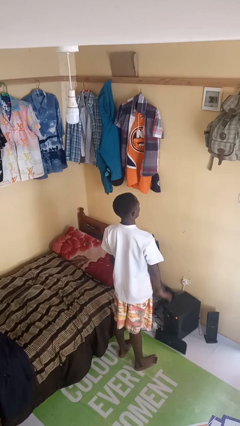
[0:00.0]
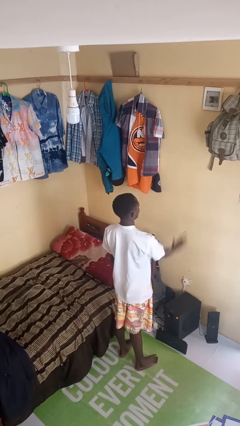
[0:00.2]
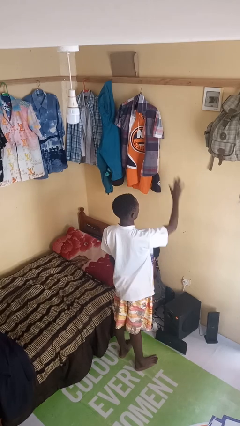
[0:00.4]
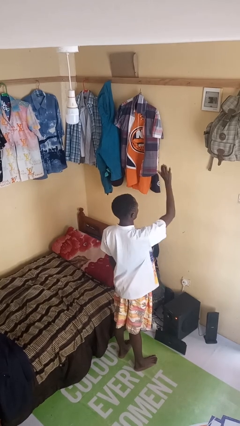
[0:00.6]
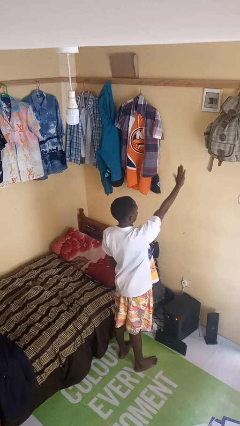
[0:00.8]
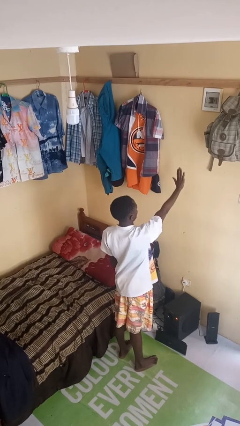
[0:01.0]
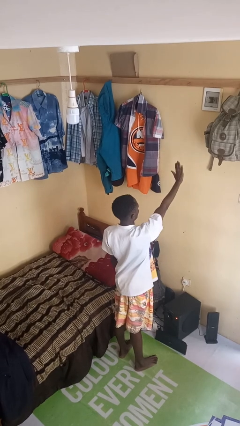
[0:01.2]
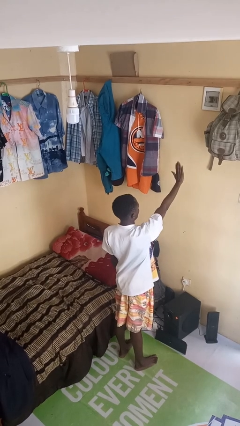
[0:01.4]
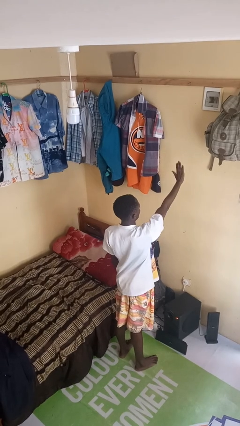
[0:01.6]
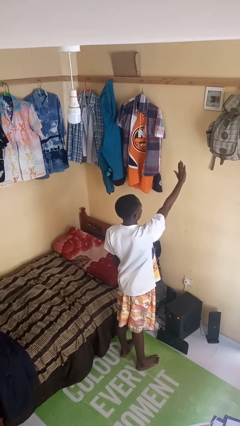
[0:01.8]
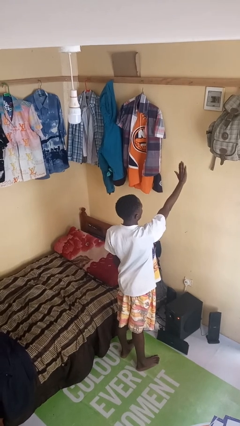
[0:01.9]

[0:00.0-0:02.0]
person gestures stop

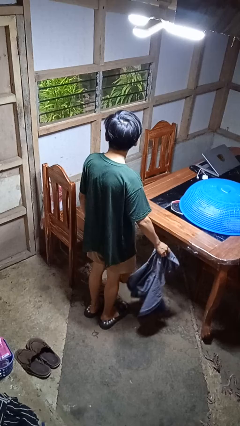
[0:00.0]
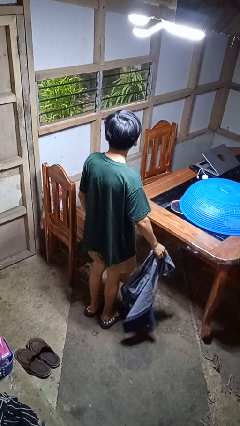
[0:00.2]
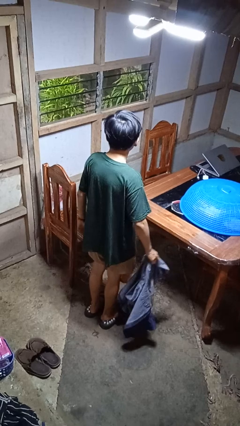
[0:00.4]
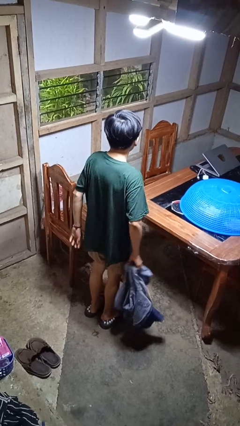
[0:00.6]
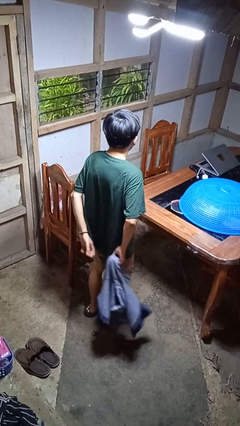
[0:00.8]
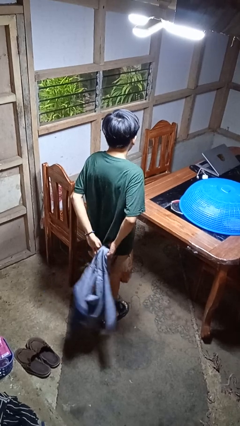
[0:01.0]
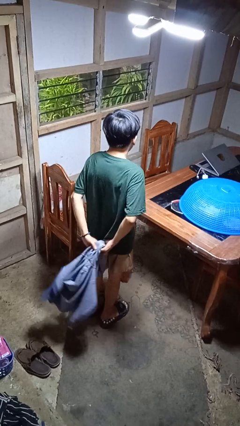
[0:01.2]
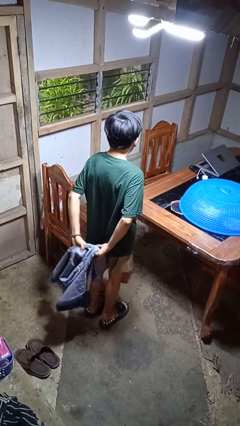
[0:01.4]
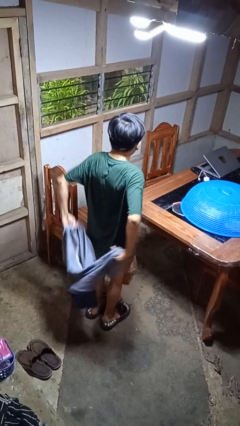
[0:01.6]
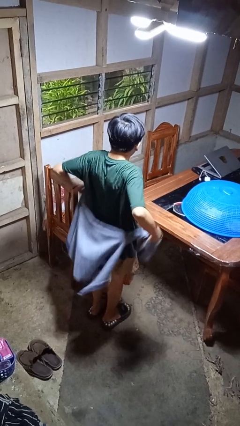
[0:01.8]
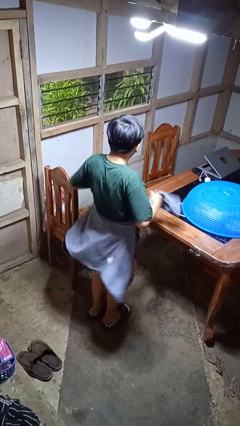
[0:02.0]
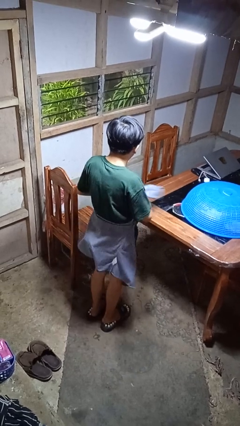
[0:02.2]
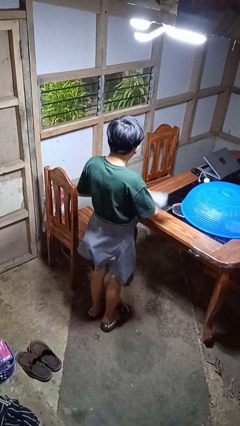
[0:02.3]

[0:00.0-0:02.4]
person ties jacket around waist

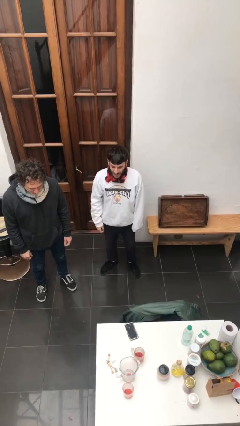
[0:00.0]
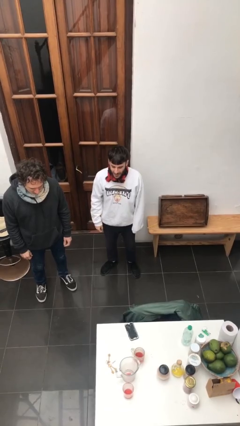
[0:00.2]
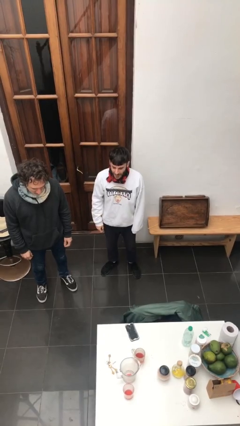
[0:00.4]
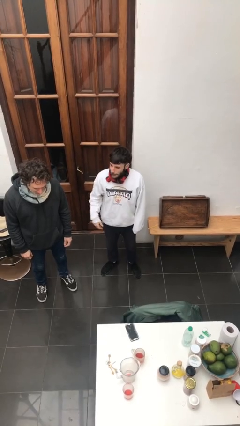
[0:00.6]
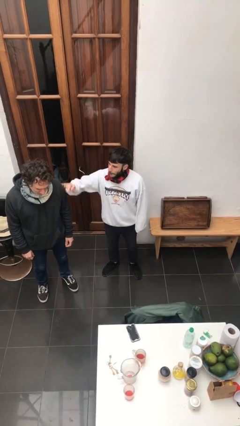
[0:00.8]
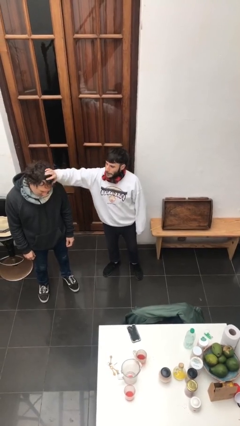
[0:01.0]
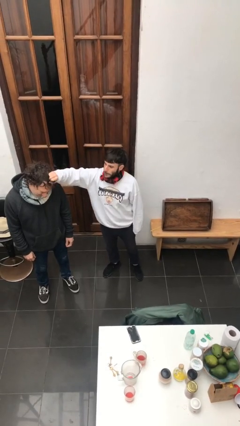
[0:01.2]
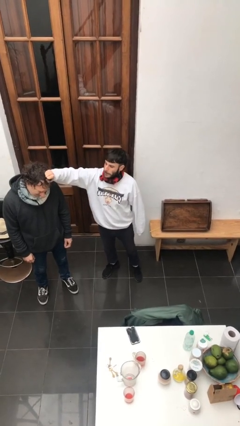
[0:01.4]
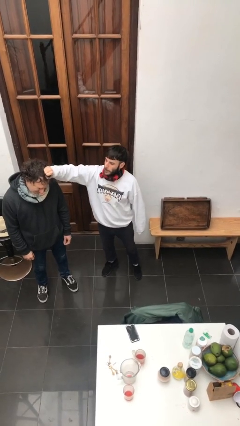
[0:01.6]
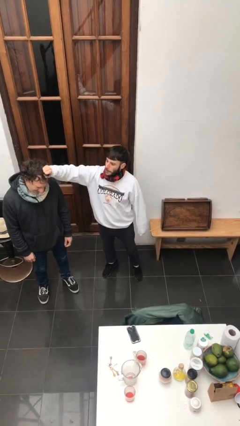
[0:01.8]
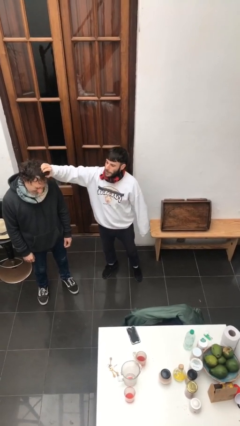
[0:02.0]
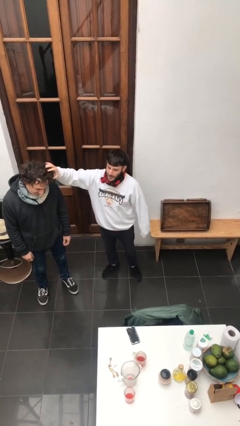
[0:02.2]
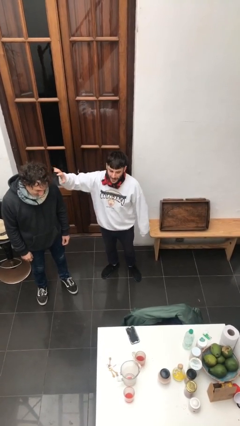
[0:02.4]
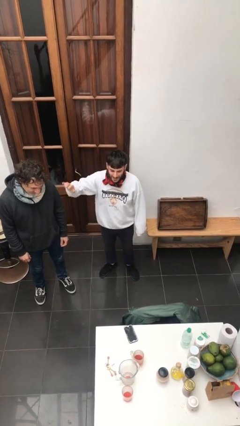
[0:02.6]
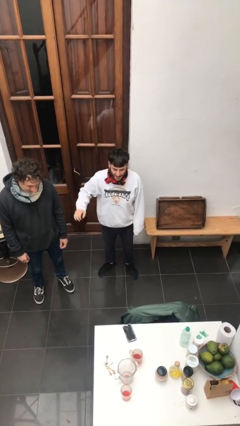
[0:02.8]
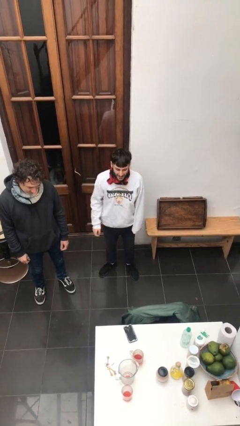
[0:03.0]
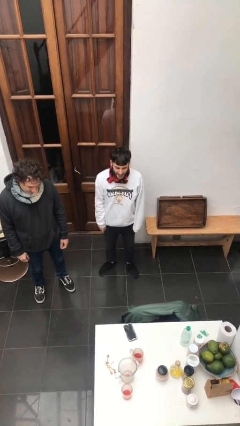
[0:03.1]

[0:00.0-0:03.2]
person grabs person by hair

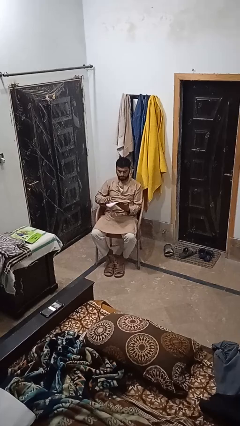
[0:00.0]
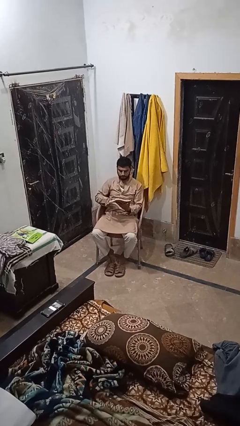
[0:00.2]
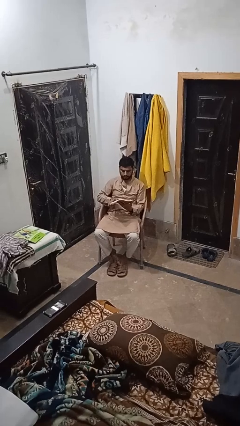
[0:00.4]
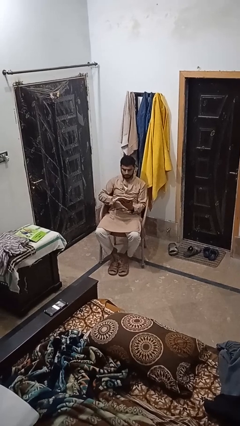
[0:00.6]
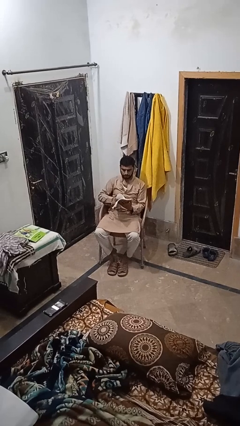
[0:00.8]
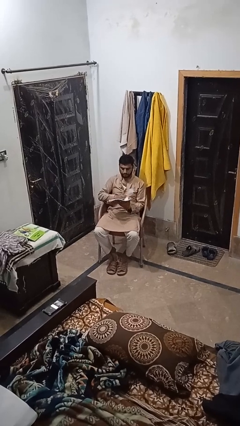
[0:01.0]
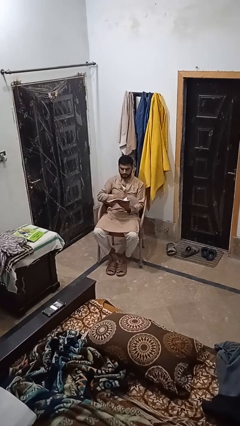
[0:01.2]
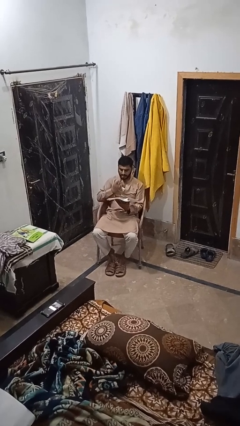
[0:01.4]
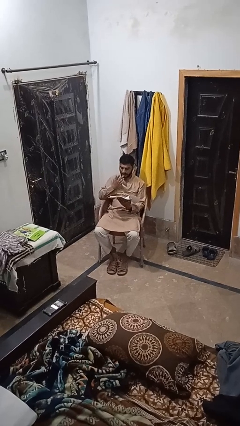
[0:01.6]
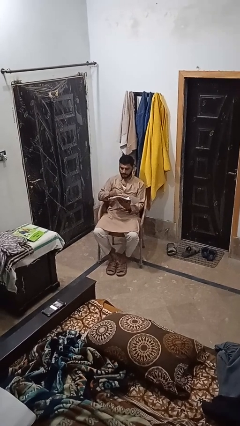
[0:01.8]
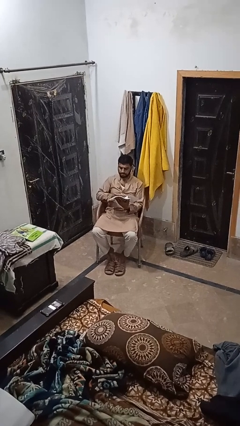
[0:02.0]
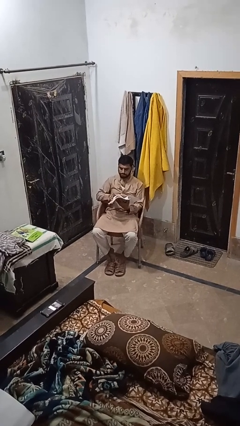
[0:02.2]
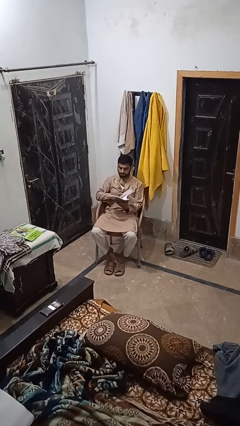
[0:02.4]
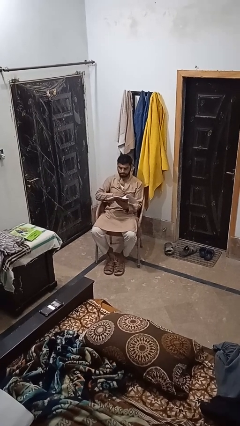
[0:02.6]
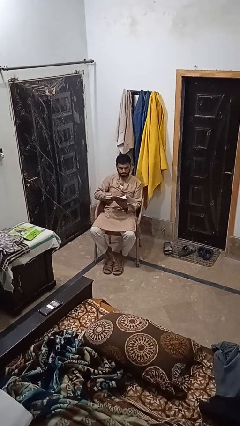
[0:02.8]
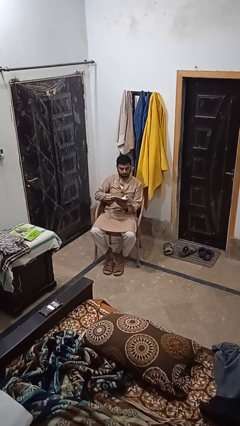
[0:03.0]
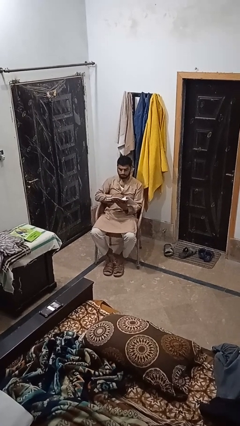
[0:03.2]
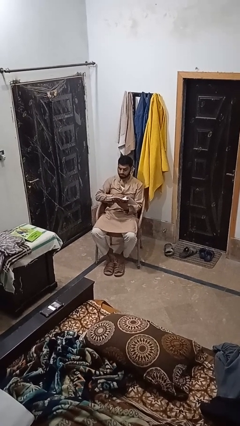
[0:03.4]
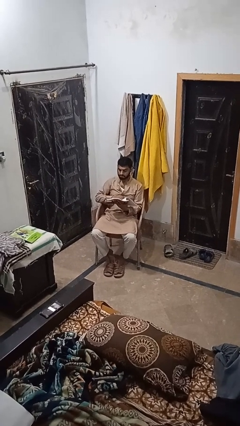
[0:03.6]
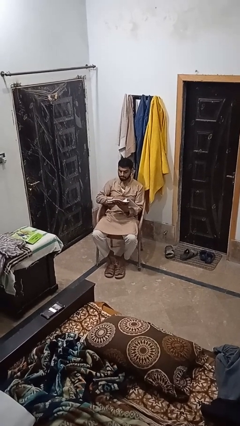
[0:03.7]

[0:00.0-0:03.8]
person reads book

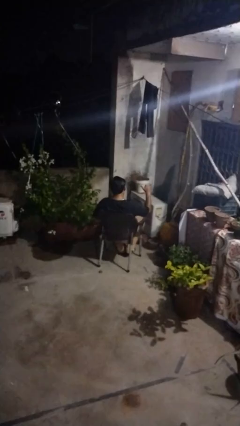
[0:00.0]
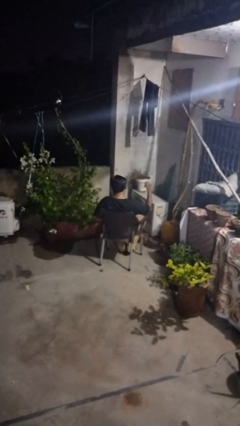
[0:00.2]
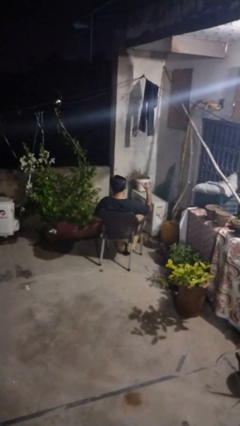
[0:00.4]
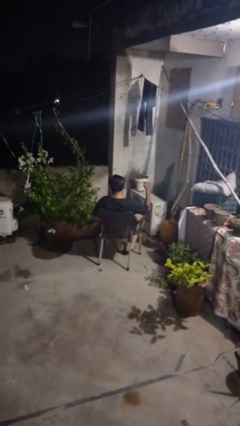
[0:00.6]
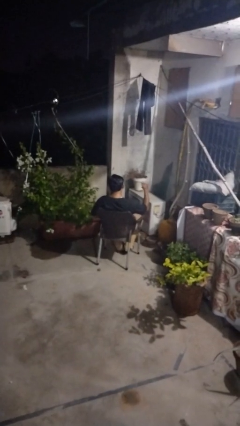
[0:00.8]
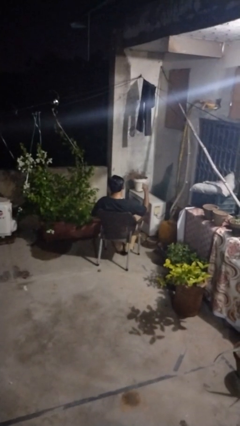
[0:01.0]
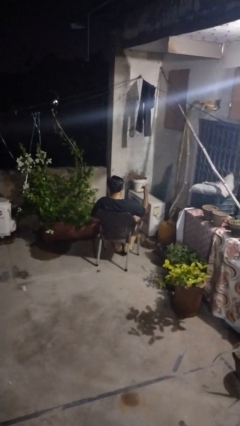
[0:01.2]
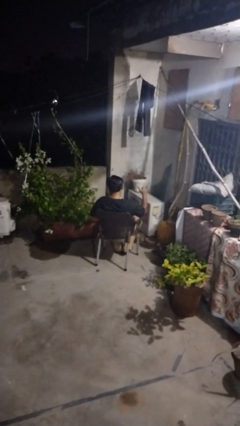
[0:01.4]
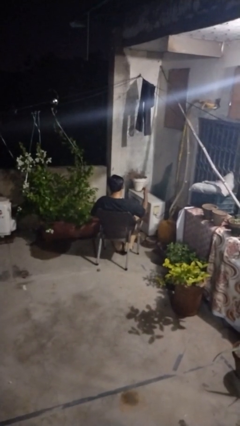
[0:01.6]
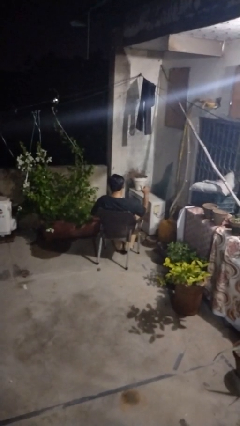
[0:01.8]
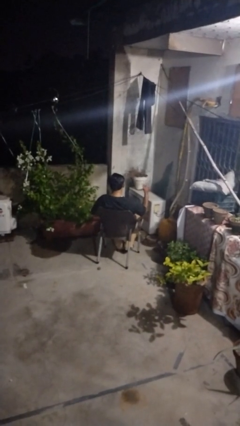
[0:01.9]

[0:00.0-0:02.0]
person gestures hang loose

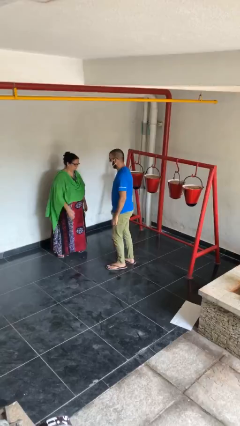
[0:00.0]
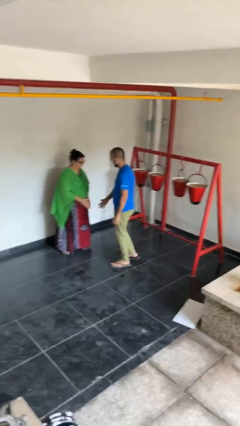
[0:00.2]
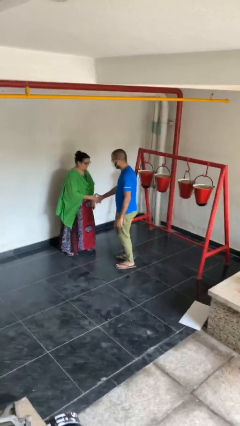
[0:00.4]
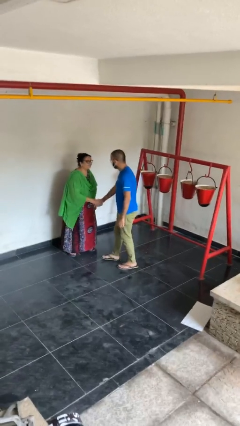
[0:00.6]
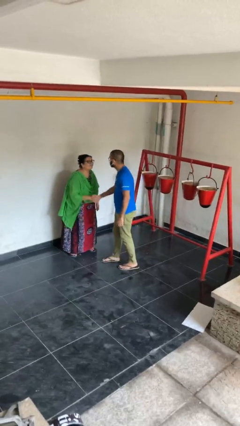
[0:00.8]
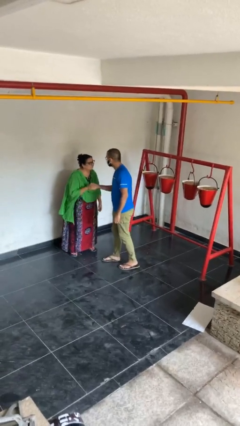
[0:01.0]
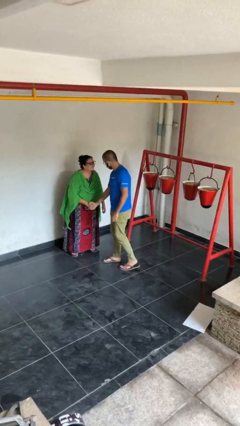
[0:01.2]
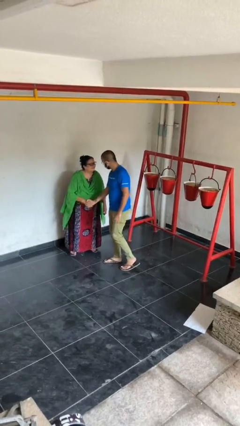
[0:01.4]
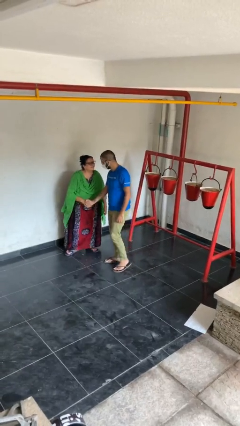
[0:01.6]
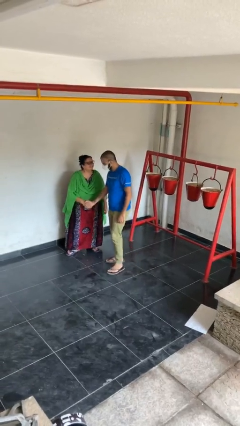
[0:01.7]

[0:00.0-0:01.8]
person shakes hand

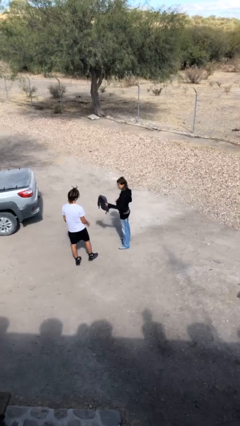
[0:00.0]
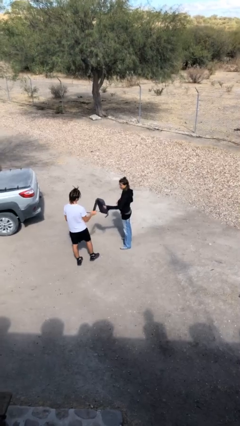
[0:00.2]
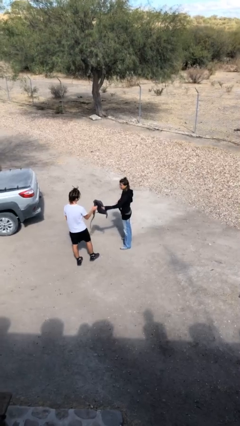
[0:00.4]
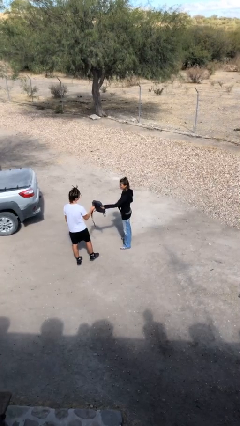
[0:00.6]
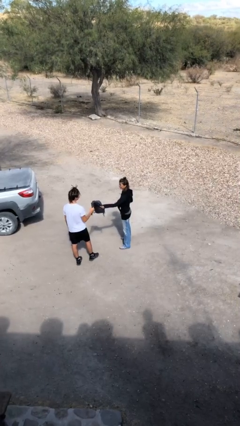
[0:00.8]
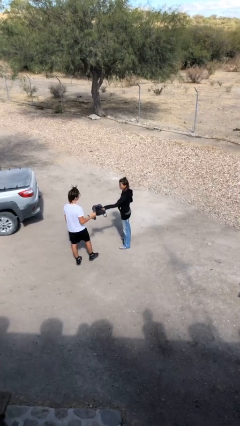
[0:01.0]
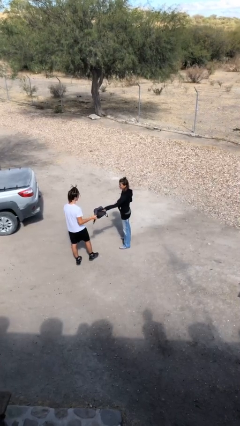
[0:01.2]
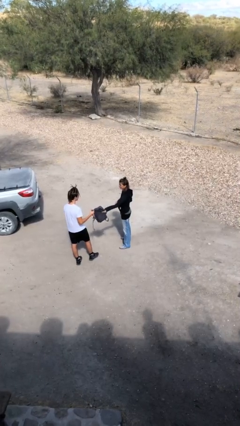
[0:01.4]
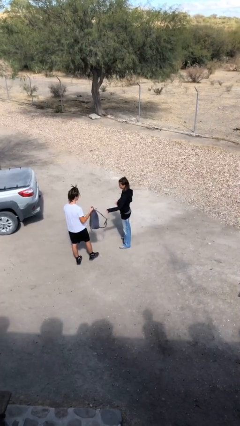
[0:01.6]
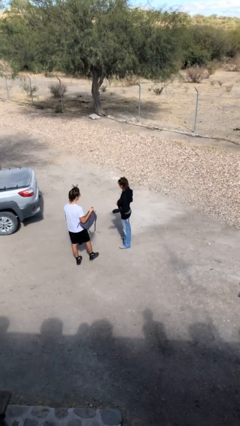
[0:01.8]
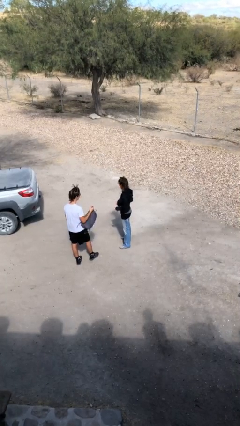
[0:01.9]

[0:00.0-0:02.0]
person transfers object to person
